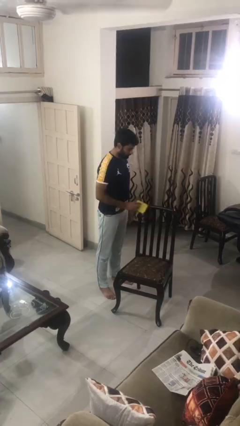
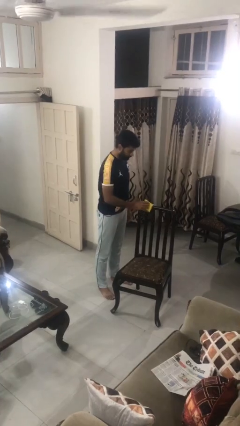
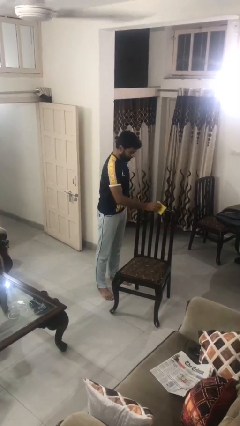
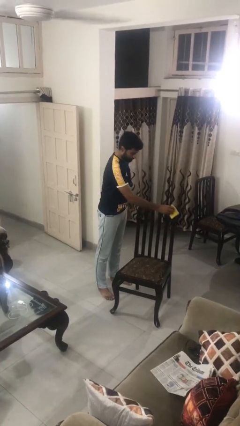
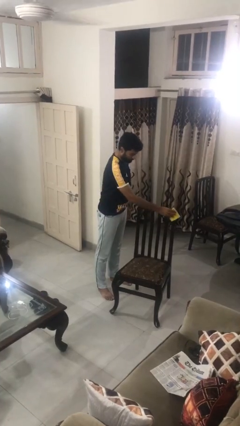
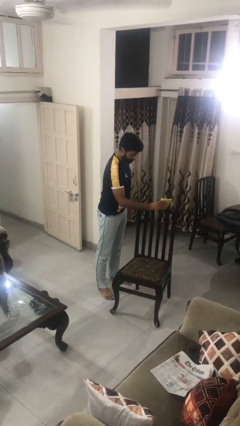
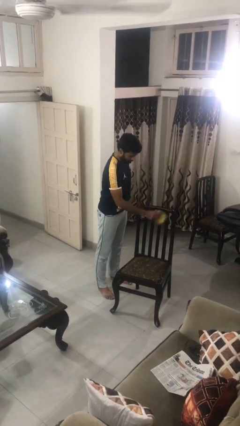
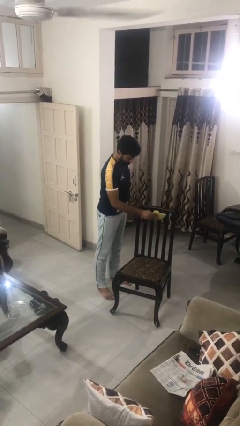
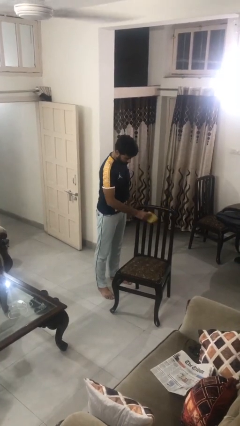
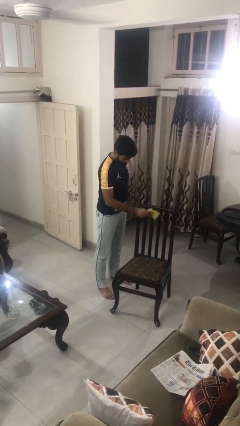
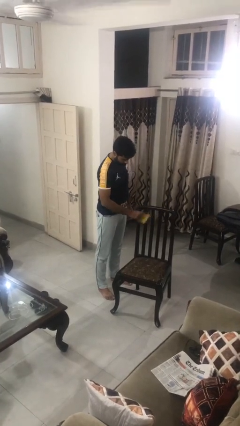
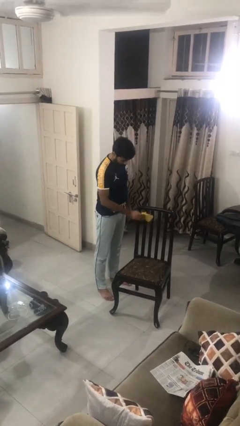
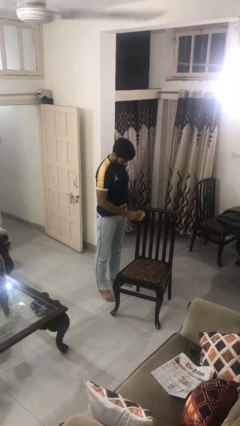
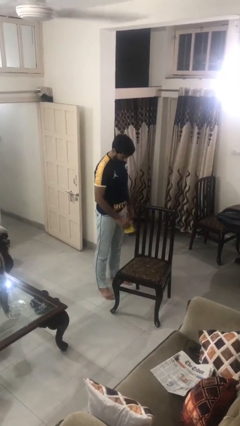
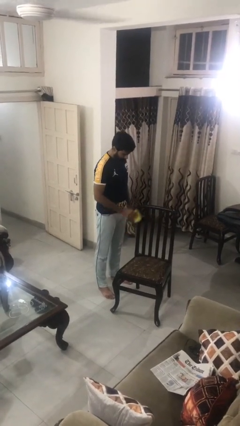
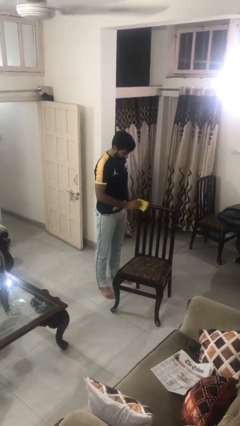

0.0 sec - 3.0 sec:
person dusts furniture

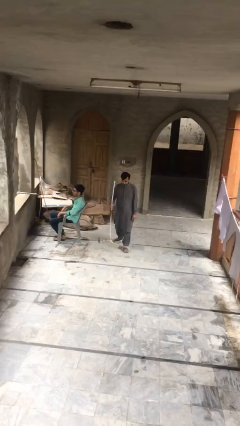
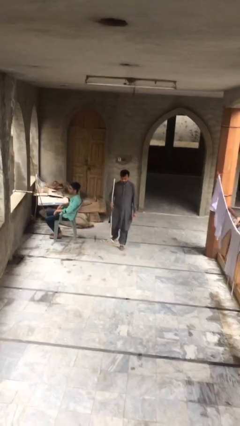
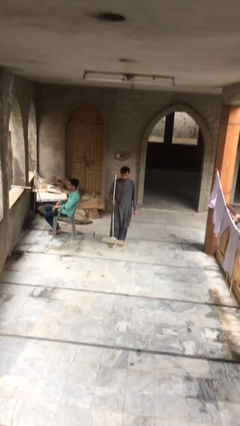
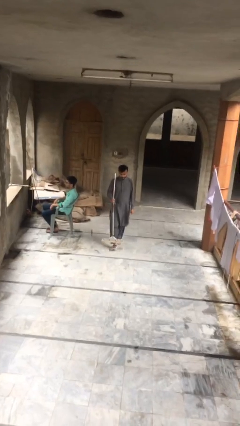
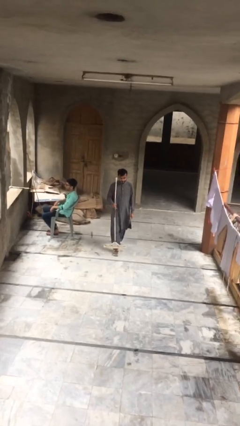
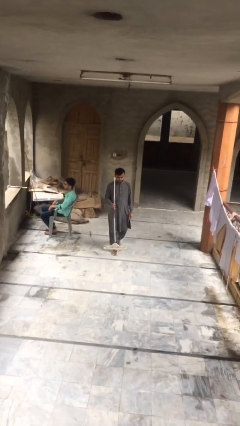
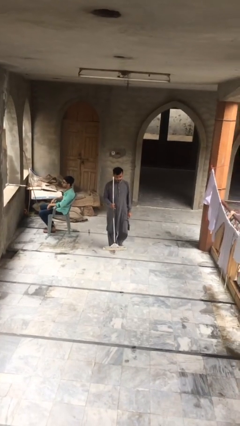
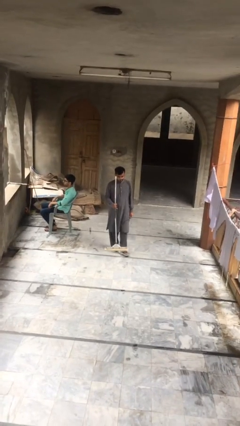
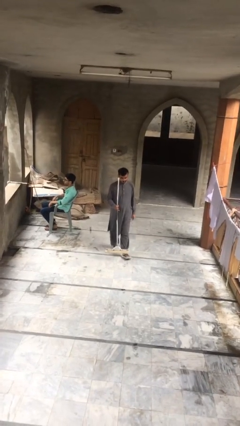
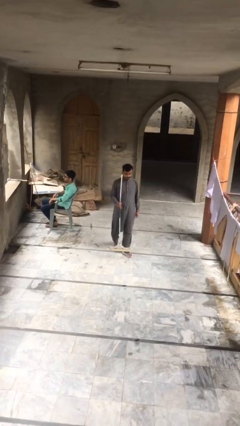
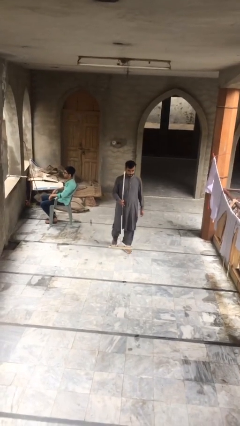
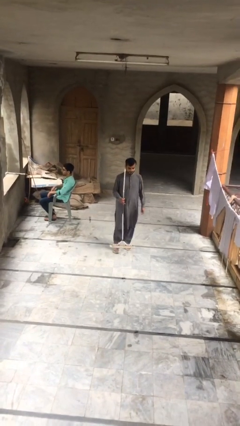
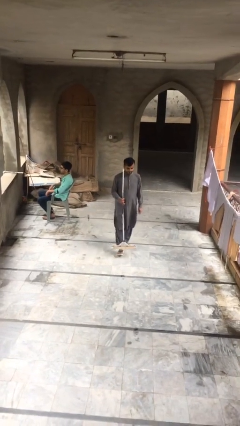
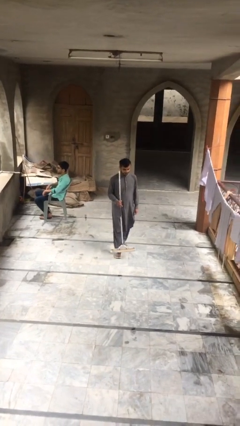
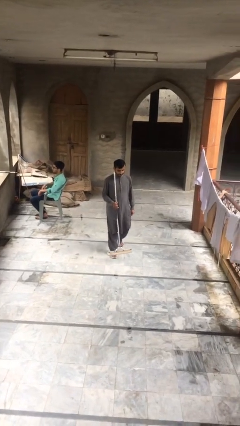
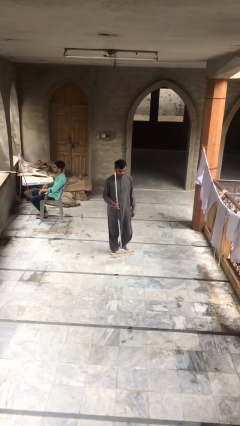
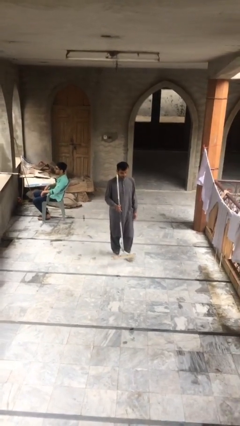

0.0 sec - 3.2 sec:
person steals object from person

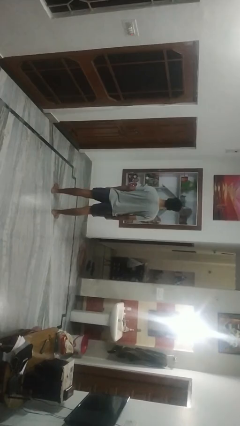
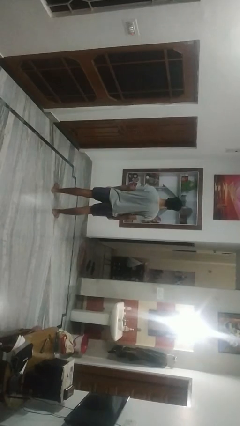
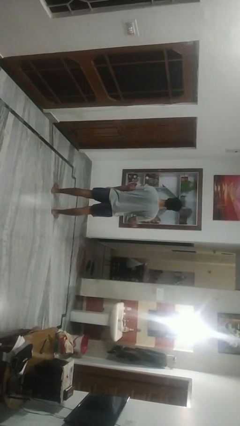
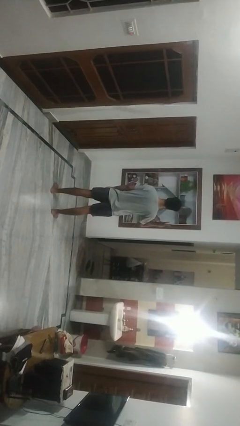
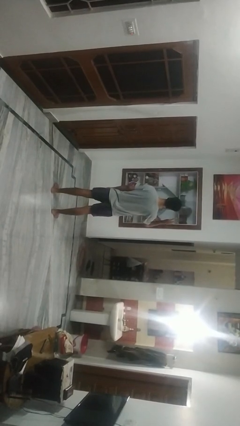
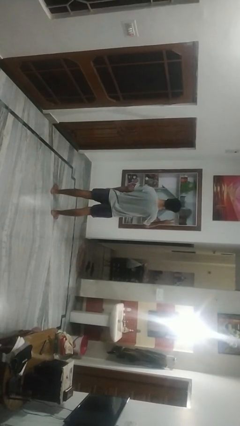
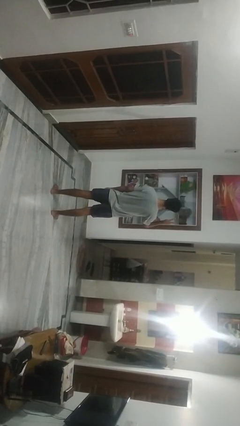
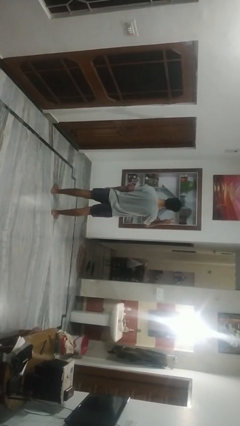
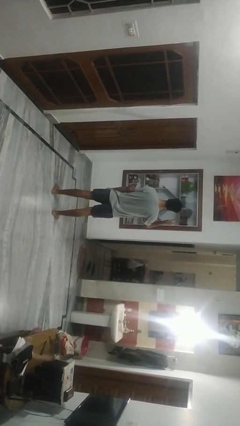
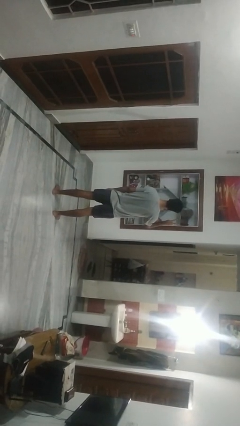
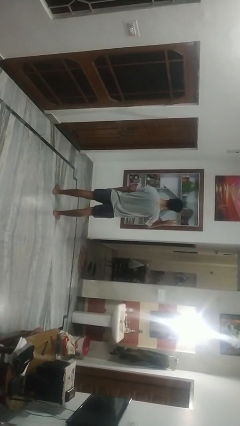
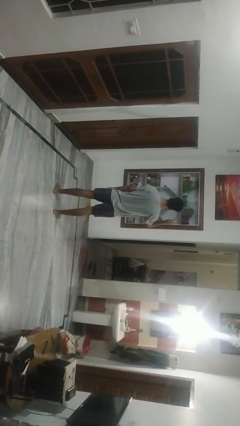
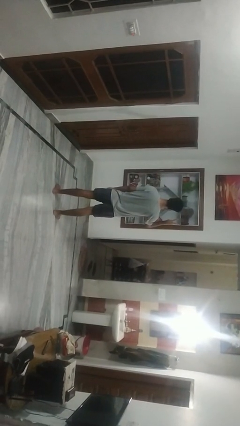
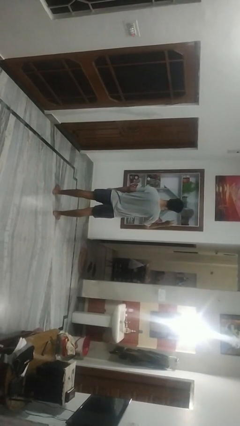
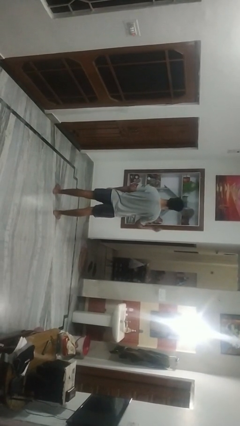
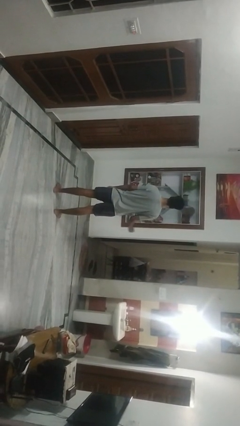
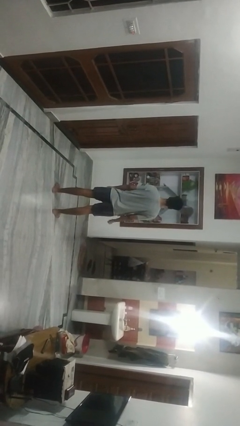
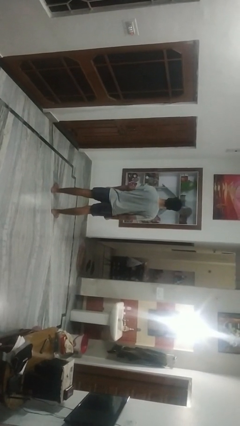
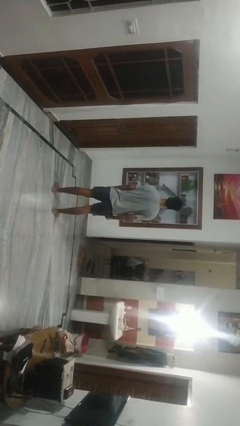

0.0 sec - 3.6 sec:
person gestures peace

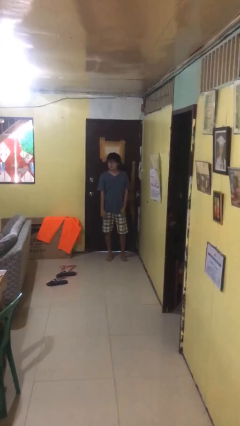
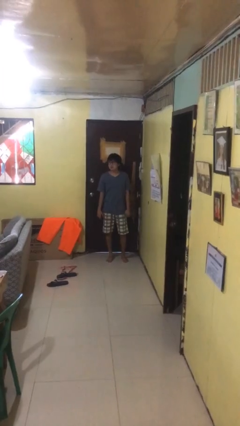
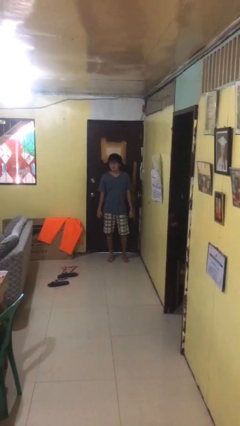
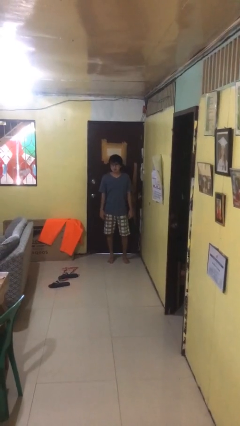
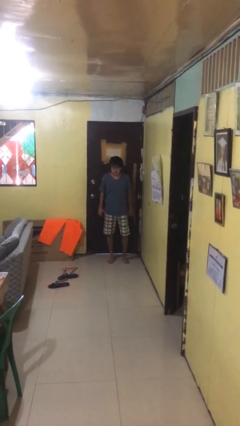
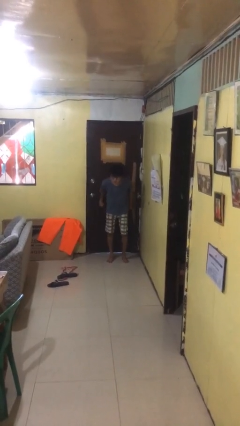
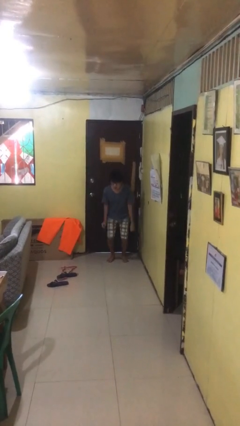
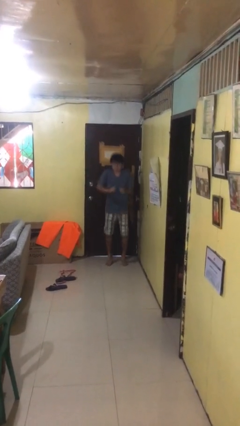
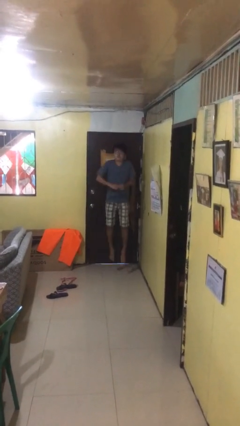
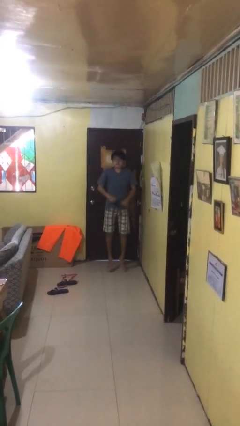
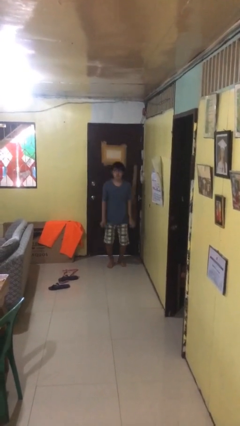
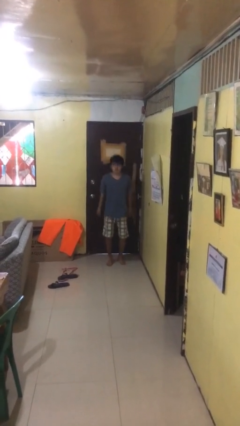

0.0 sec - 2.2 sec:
person jumps

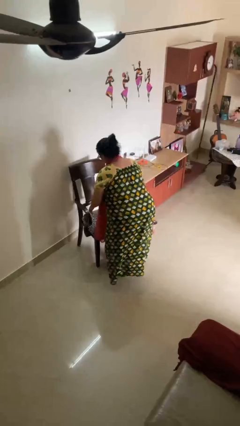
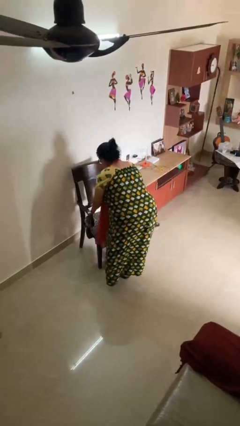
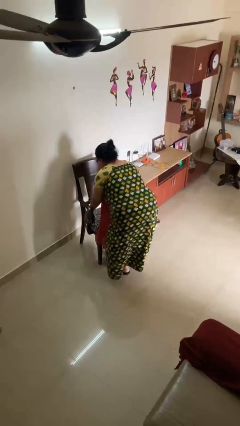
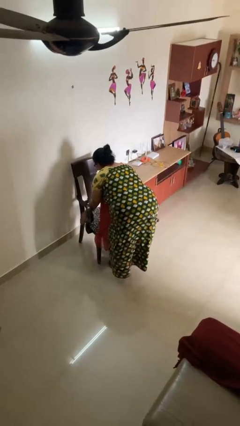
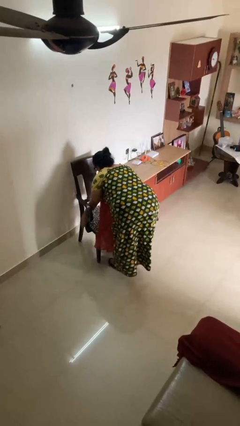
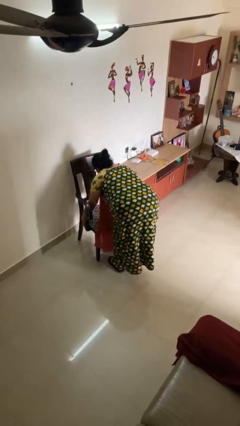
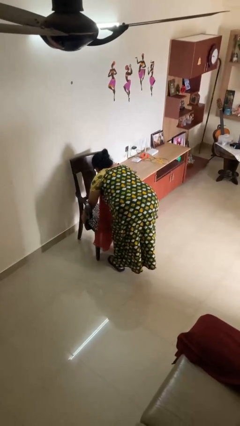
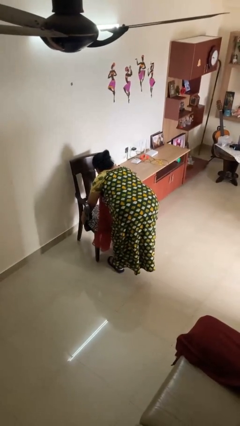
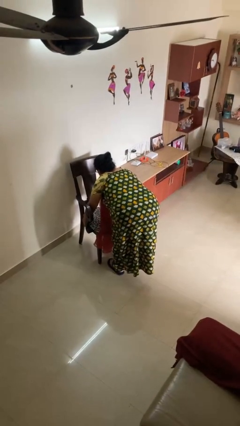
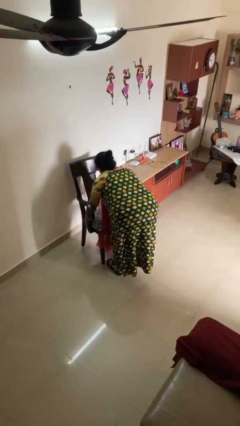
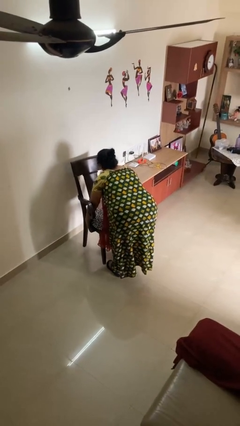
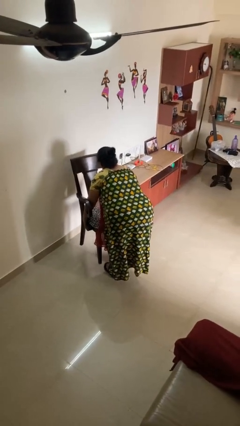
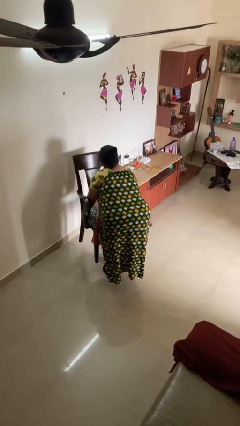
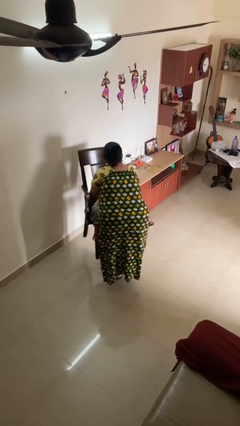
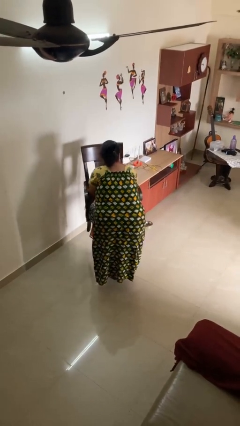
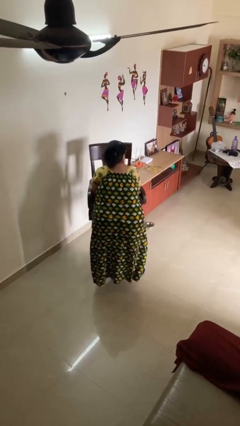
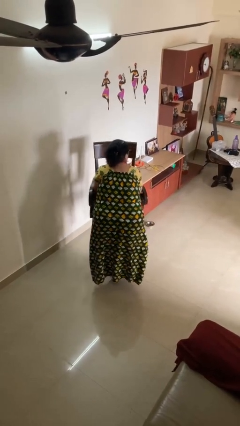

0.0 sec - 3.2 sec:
person picks up object from floor

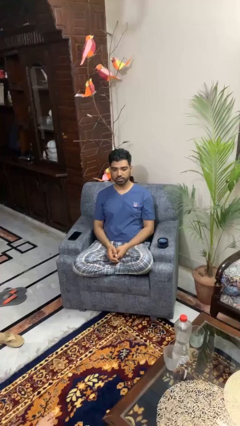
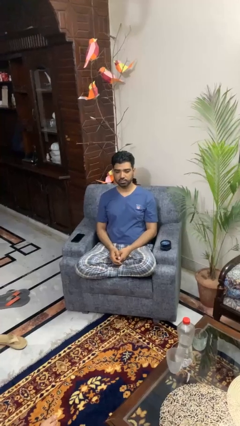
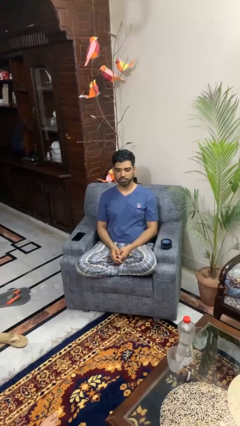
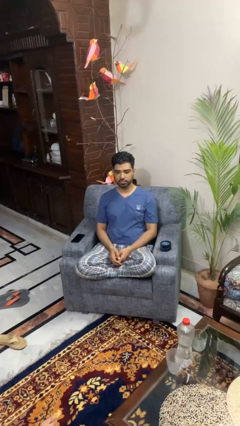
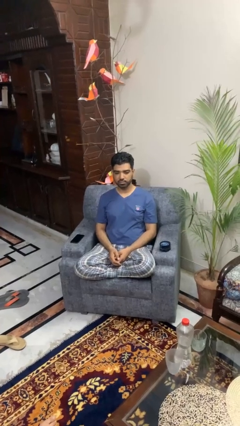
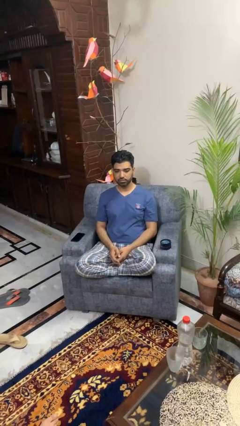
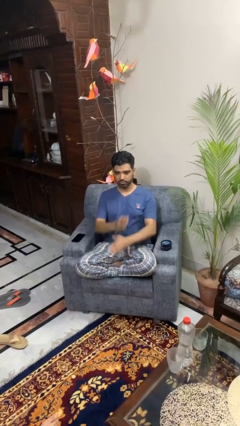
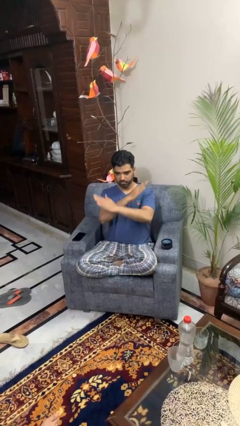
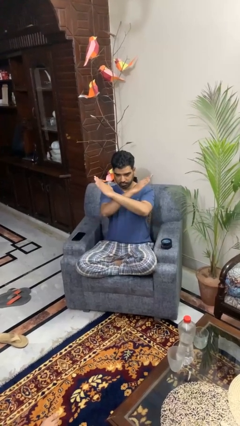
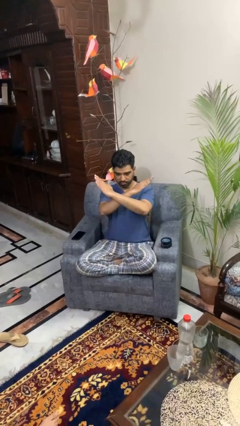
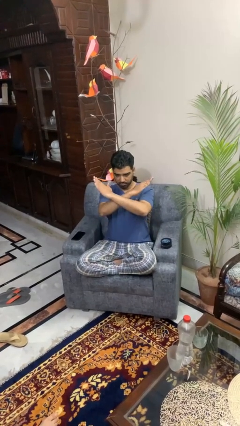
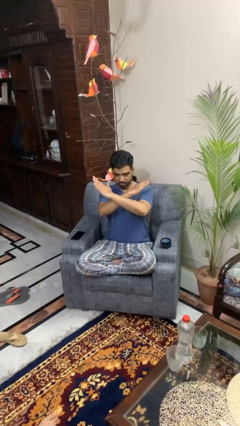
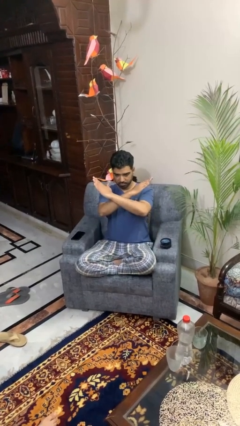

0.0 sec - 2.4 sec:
person gestures arms x
